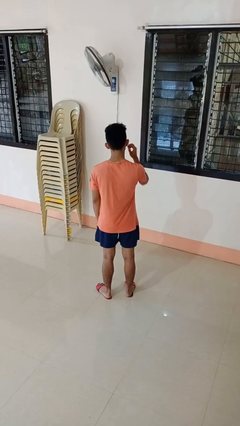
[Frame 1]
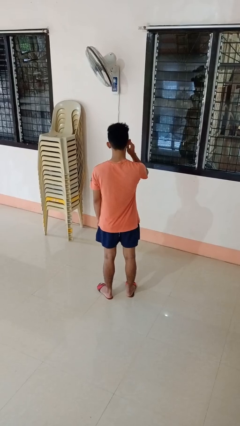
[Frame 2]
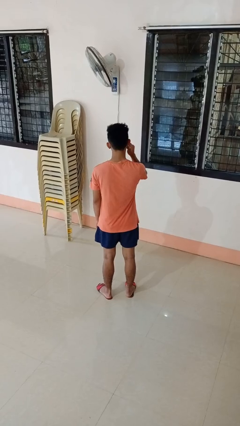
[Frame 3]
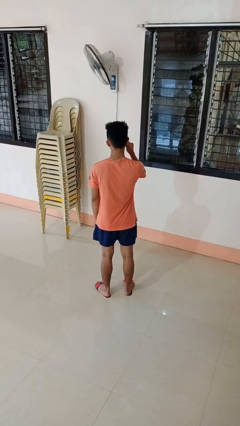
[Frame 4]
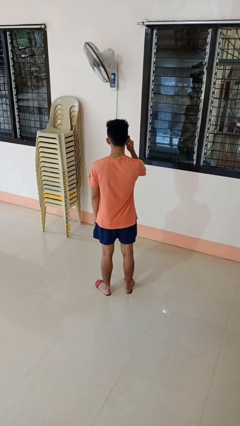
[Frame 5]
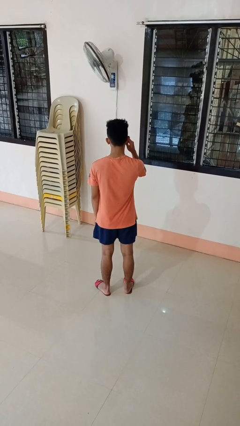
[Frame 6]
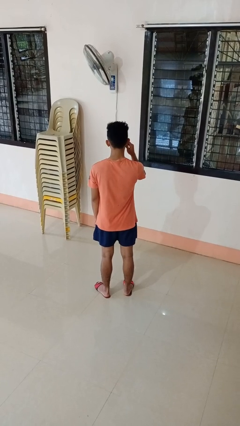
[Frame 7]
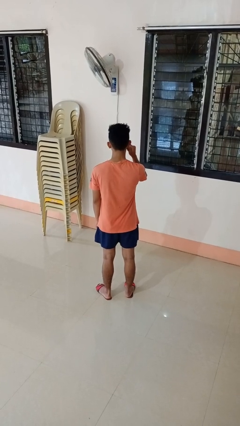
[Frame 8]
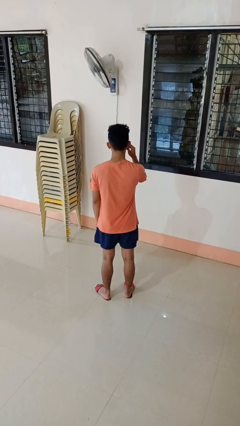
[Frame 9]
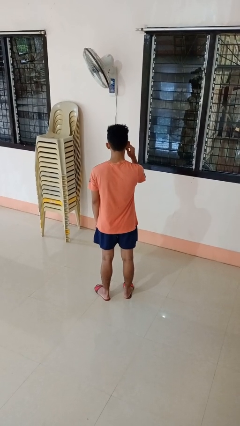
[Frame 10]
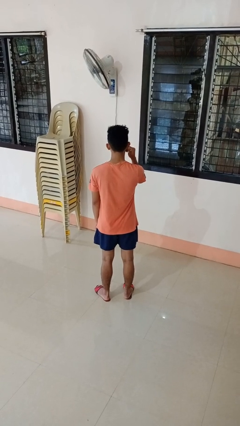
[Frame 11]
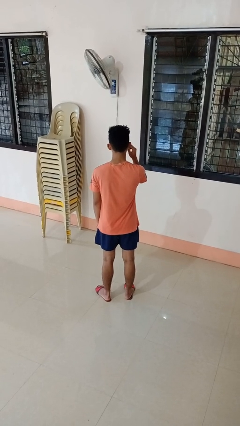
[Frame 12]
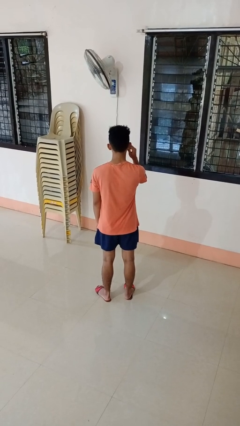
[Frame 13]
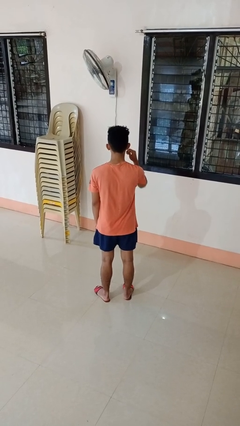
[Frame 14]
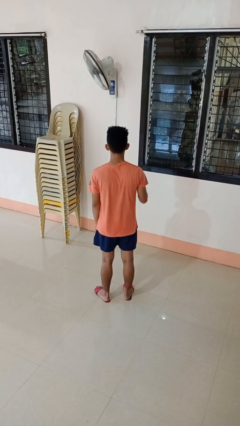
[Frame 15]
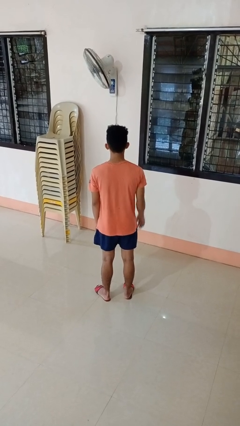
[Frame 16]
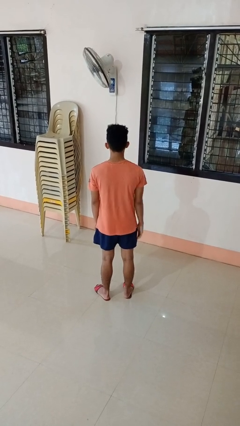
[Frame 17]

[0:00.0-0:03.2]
person touches earlobe

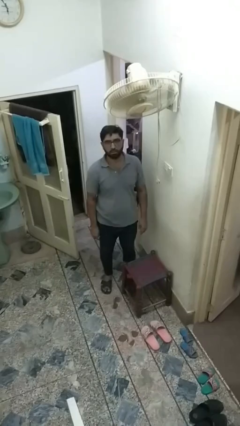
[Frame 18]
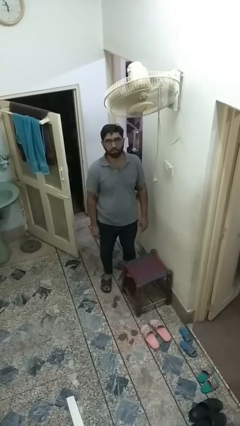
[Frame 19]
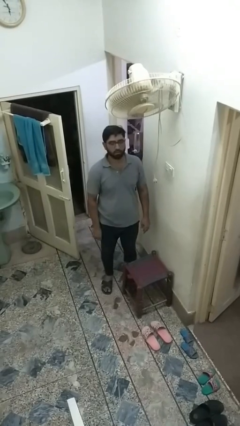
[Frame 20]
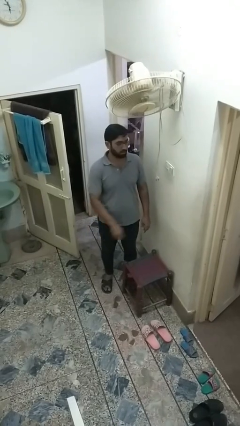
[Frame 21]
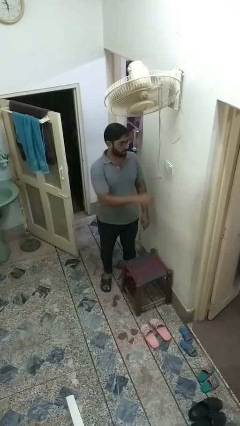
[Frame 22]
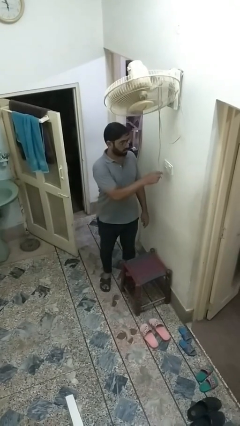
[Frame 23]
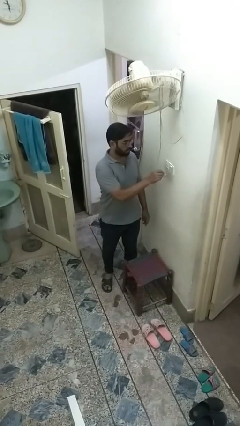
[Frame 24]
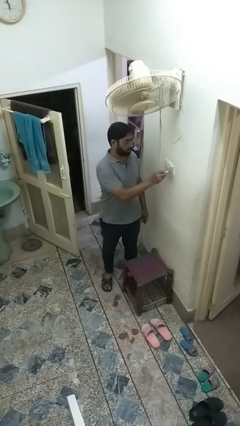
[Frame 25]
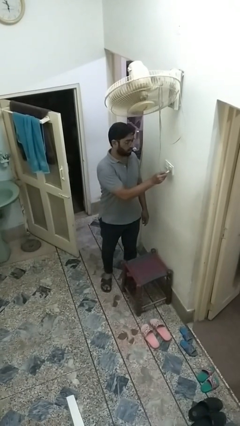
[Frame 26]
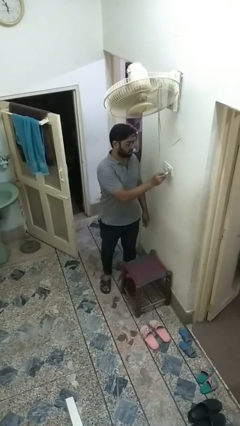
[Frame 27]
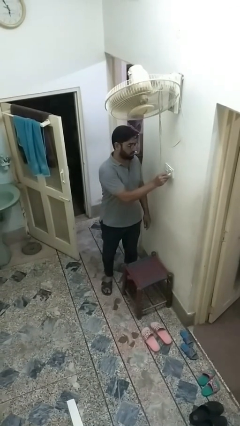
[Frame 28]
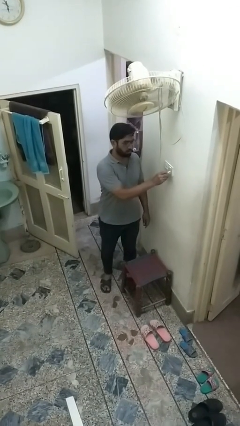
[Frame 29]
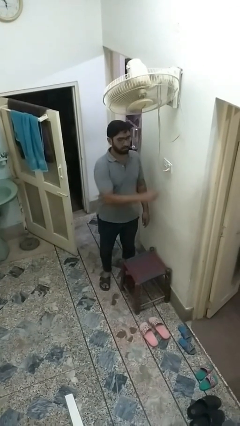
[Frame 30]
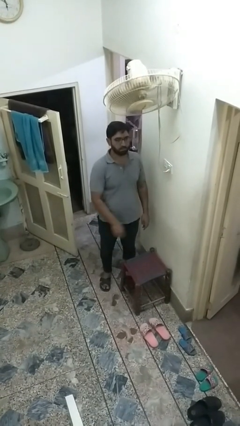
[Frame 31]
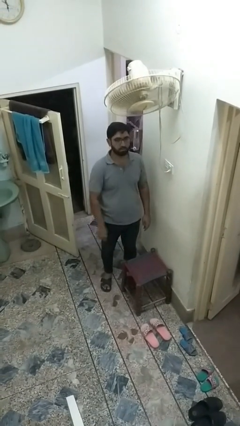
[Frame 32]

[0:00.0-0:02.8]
person plugs into electrical socket

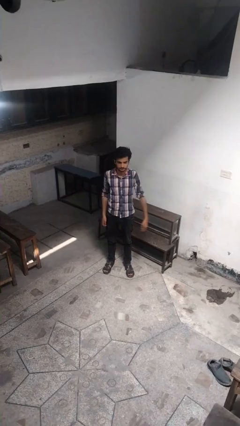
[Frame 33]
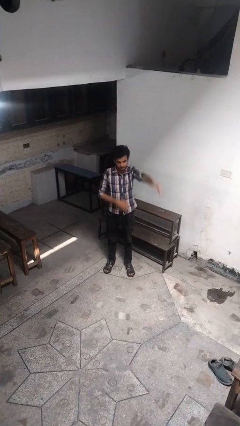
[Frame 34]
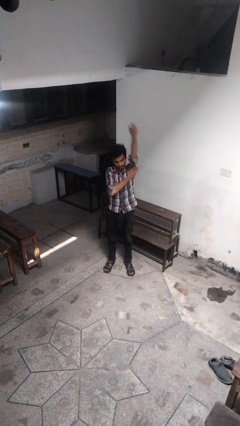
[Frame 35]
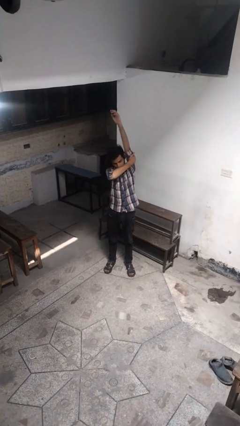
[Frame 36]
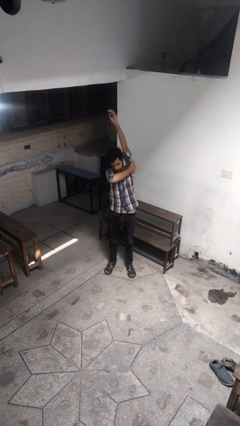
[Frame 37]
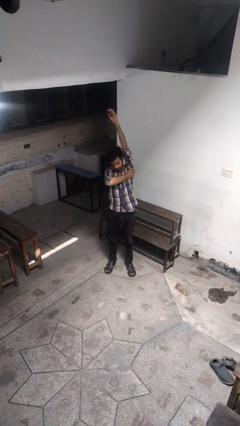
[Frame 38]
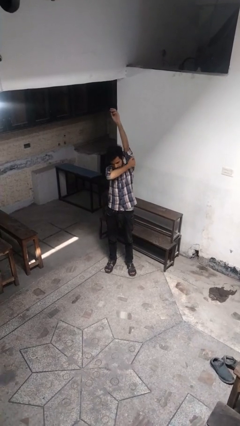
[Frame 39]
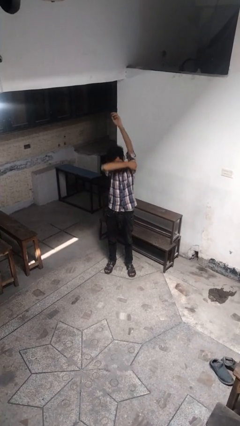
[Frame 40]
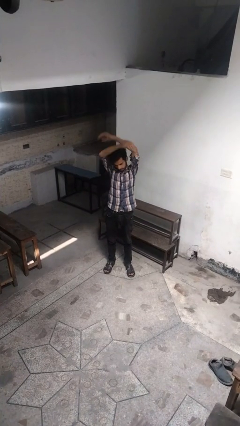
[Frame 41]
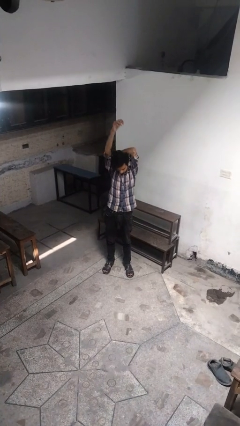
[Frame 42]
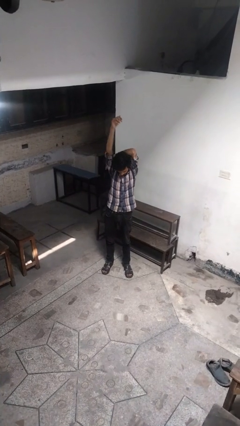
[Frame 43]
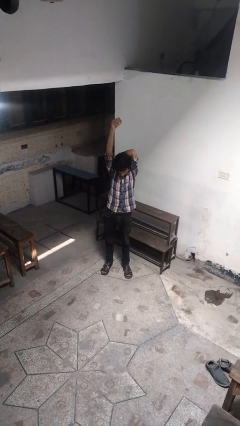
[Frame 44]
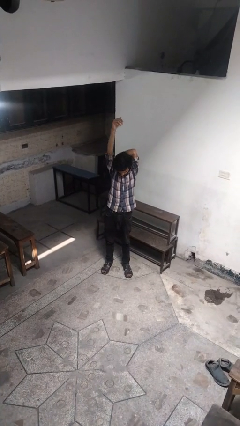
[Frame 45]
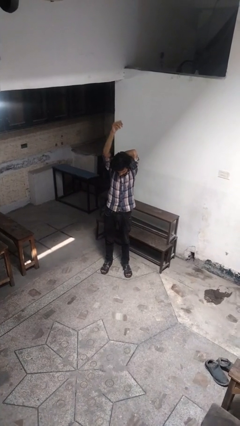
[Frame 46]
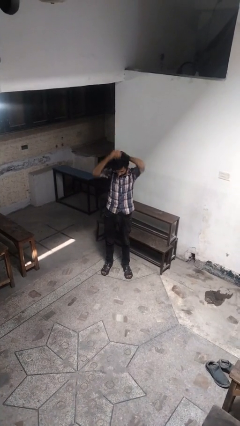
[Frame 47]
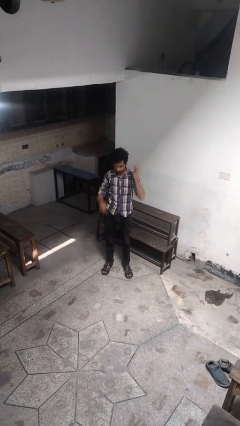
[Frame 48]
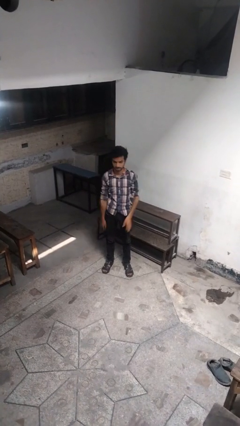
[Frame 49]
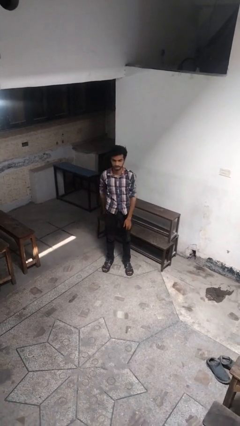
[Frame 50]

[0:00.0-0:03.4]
person stretches arms over head

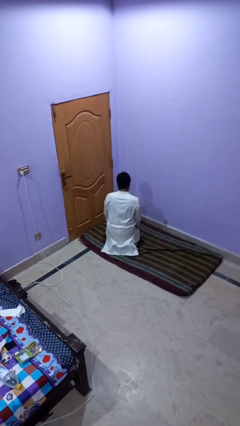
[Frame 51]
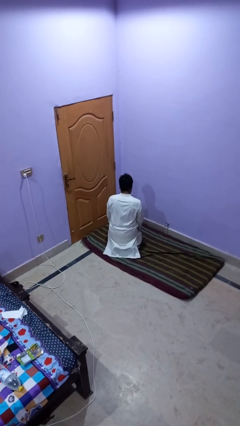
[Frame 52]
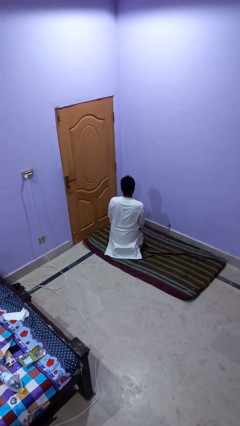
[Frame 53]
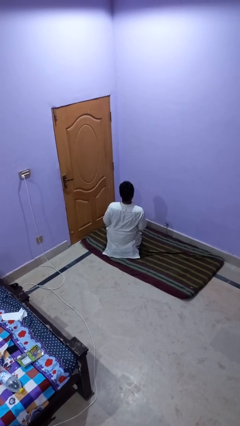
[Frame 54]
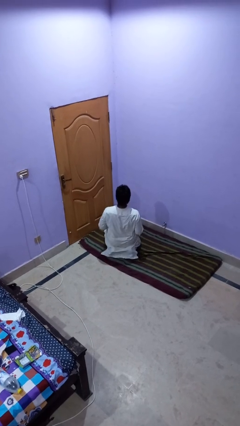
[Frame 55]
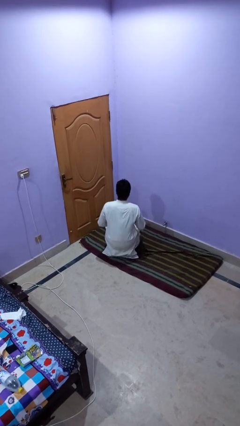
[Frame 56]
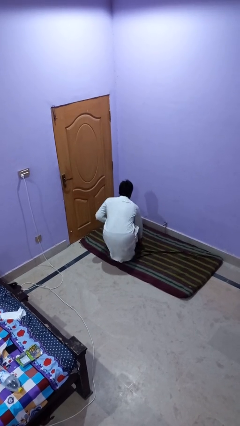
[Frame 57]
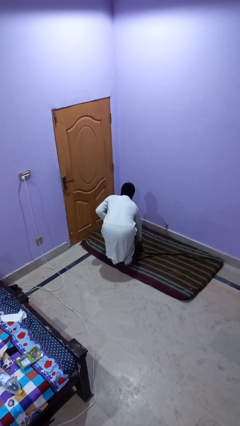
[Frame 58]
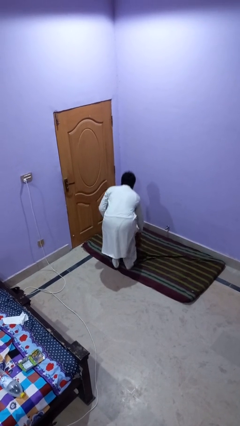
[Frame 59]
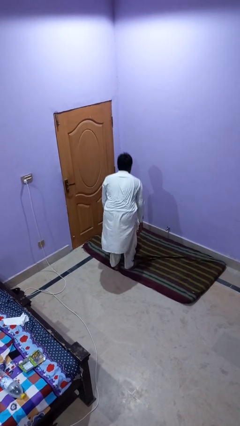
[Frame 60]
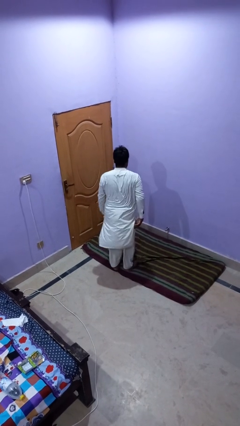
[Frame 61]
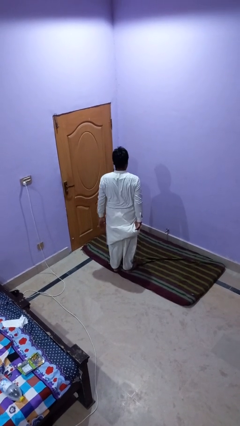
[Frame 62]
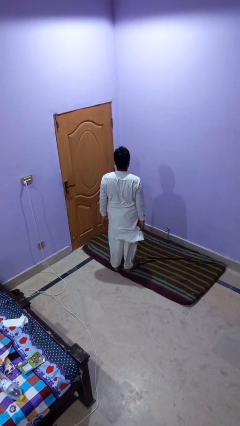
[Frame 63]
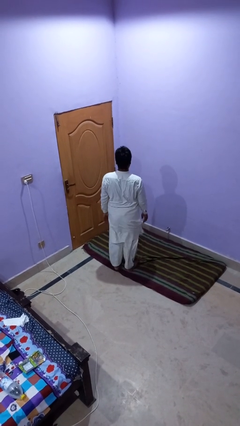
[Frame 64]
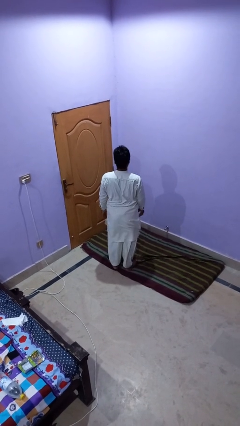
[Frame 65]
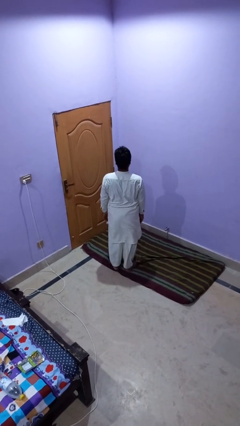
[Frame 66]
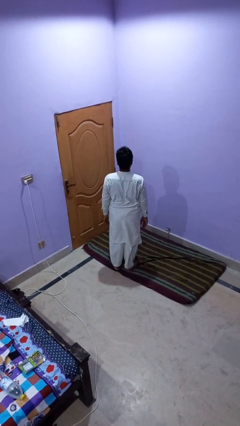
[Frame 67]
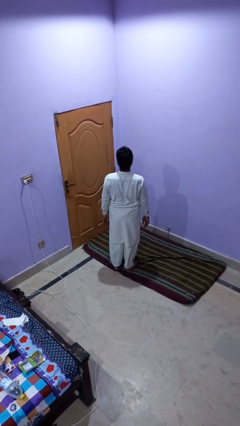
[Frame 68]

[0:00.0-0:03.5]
person stands up from floor

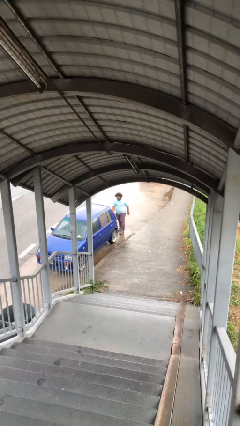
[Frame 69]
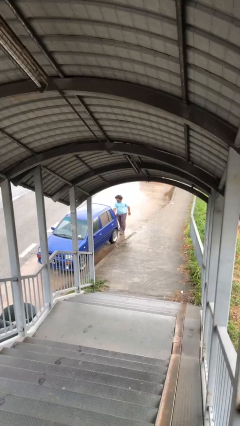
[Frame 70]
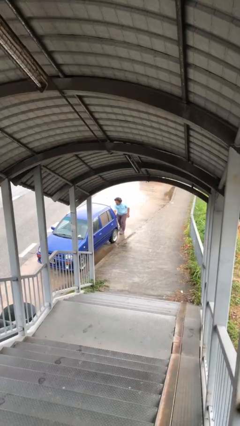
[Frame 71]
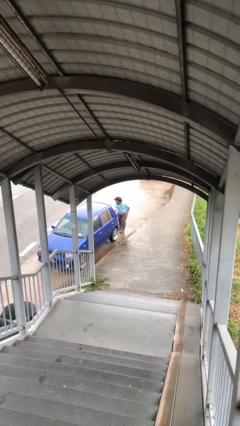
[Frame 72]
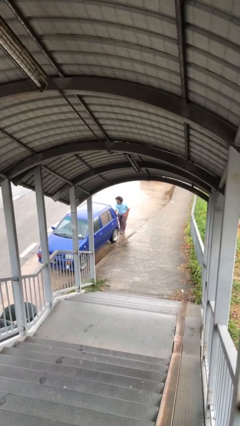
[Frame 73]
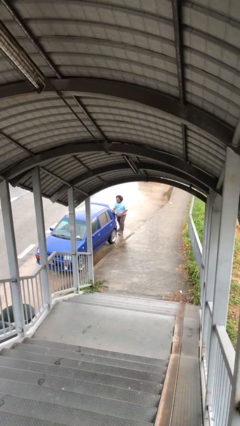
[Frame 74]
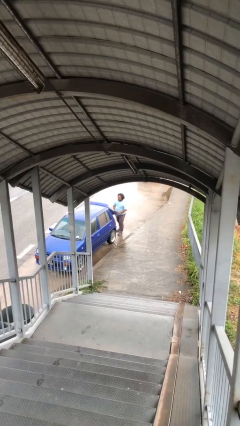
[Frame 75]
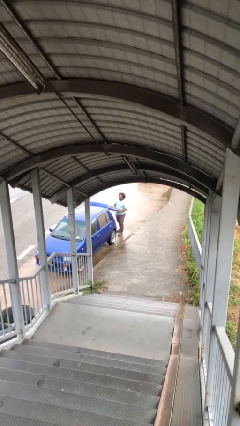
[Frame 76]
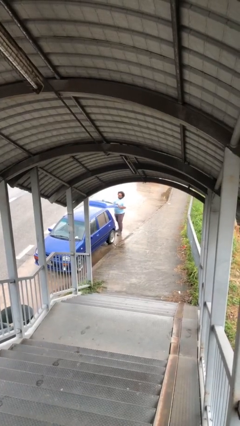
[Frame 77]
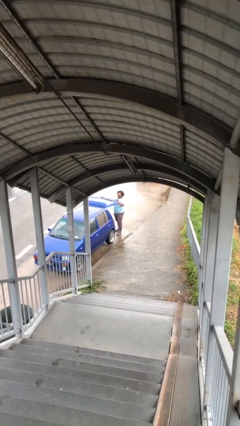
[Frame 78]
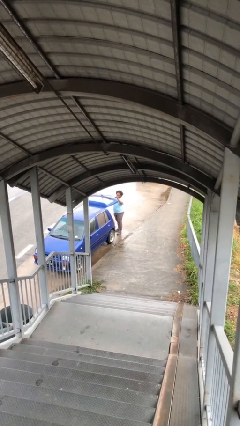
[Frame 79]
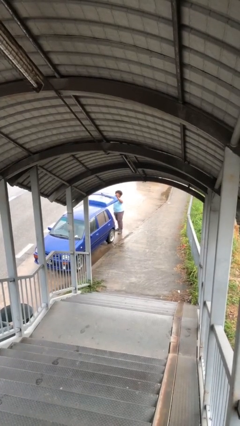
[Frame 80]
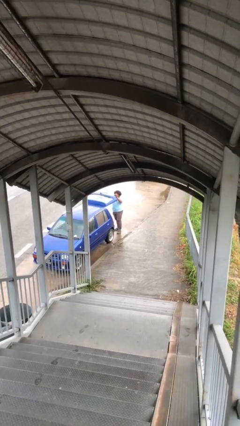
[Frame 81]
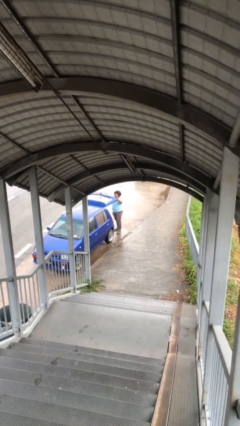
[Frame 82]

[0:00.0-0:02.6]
person opens car trunk

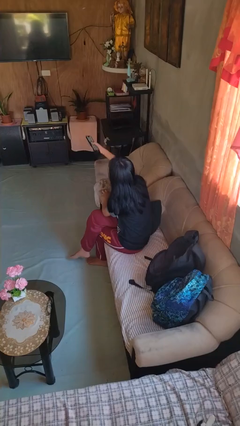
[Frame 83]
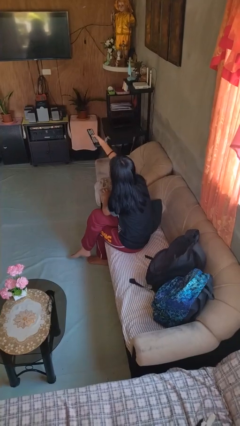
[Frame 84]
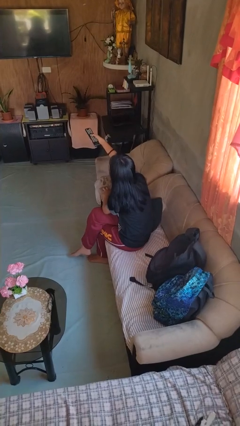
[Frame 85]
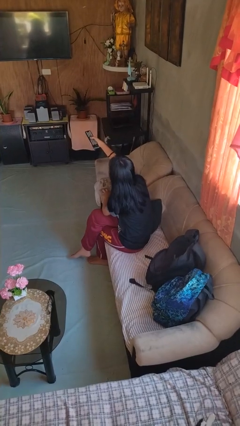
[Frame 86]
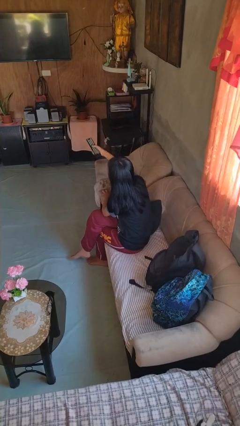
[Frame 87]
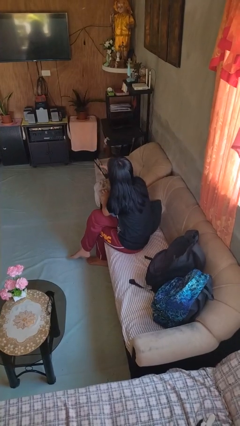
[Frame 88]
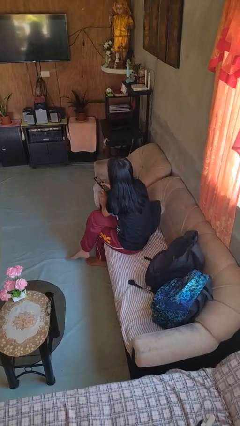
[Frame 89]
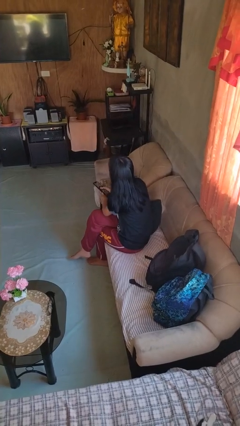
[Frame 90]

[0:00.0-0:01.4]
person uses television remote

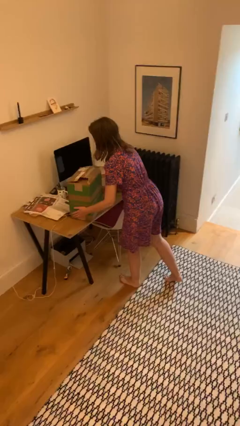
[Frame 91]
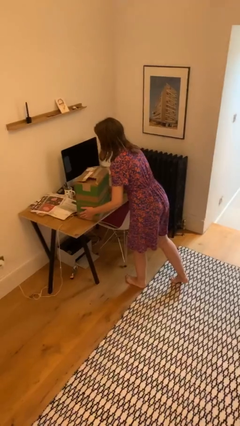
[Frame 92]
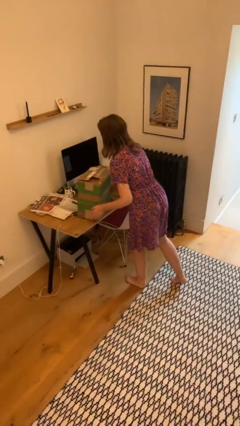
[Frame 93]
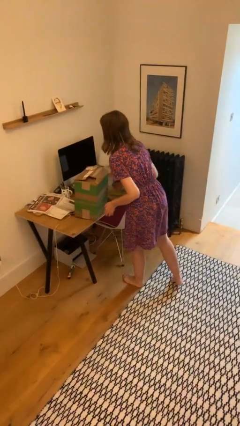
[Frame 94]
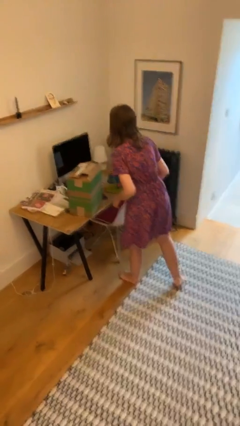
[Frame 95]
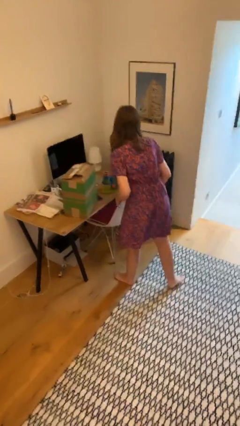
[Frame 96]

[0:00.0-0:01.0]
person puts down object on table
